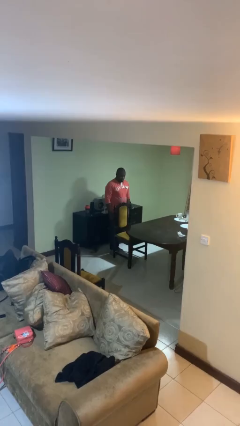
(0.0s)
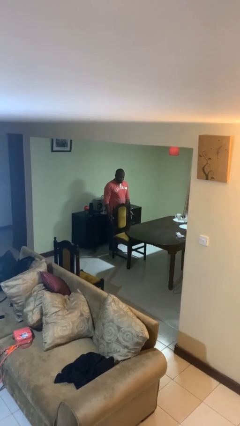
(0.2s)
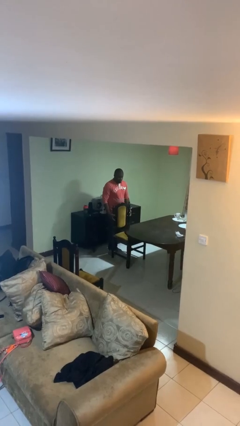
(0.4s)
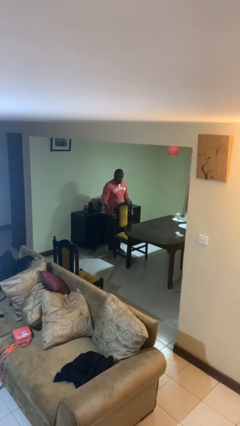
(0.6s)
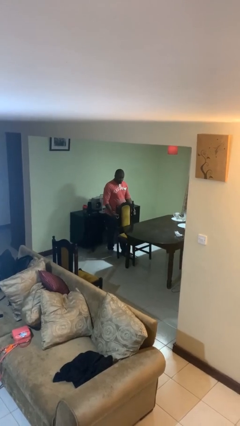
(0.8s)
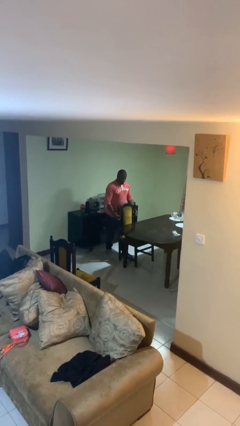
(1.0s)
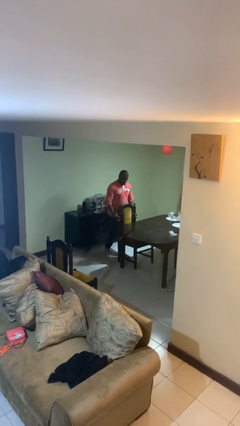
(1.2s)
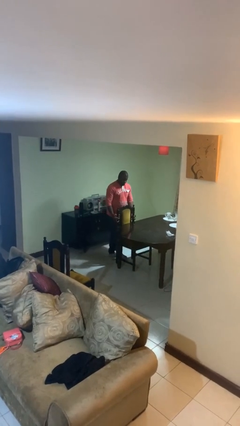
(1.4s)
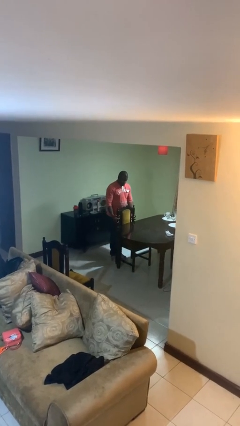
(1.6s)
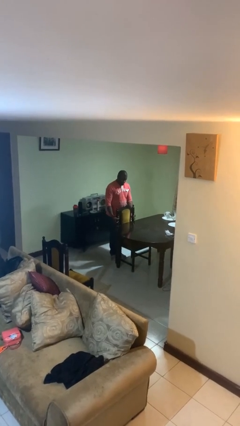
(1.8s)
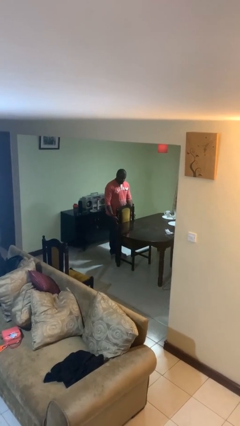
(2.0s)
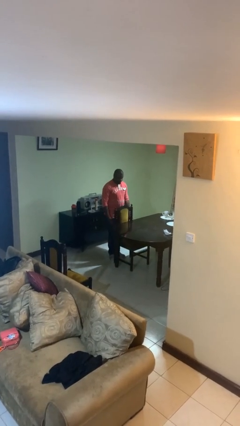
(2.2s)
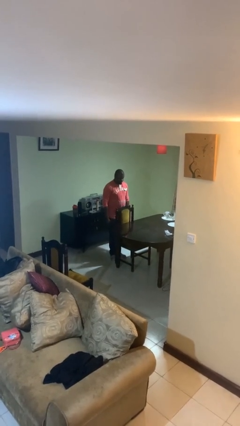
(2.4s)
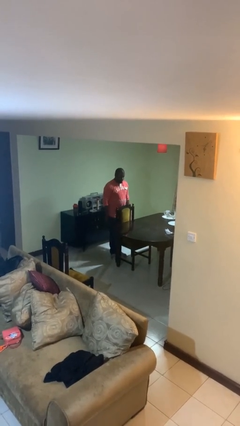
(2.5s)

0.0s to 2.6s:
person pushes in chair

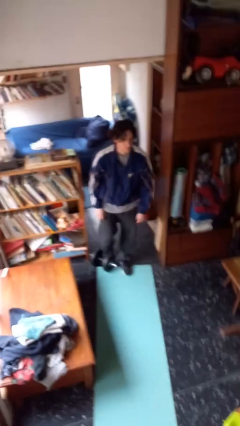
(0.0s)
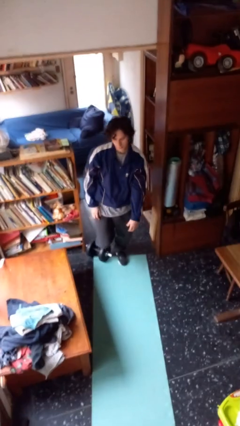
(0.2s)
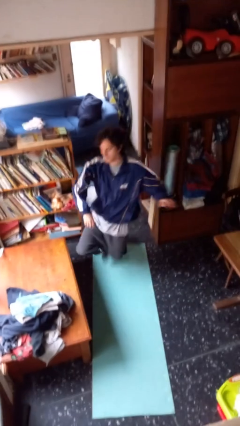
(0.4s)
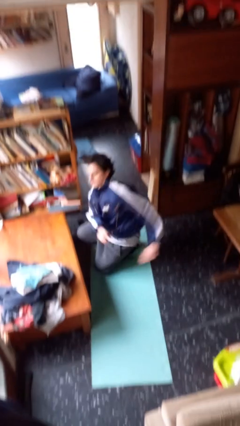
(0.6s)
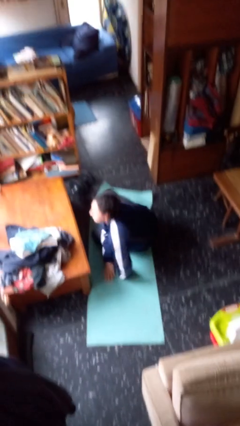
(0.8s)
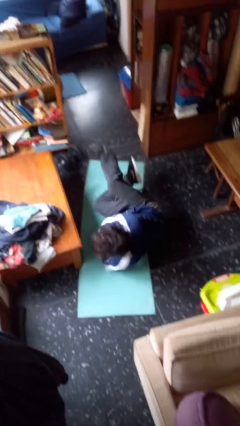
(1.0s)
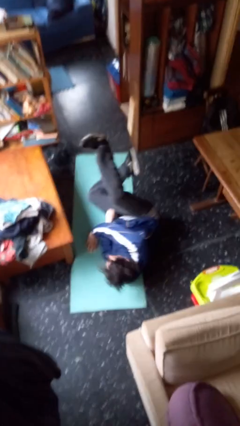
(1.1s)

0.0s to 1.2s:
person trips on object on floor

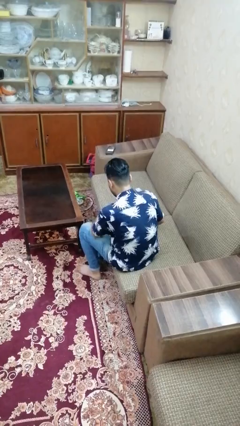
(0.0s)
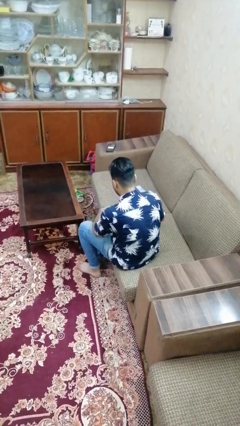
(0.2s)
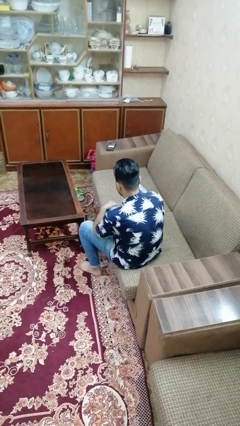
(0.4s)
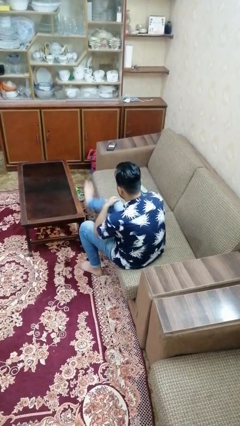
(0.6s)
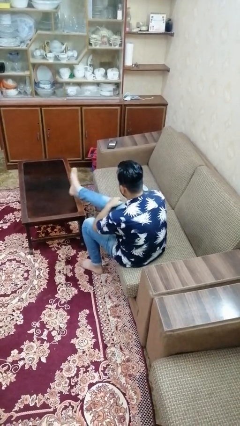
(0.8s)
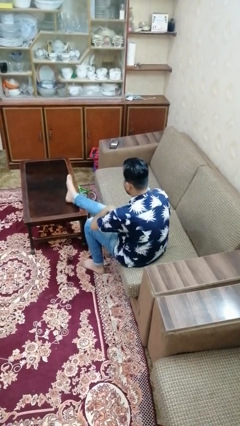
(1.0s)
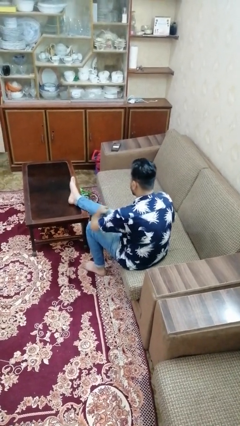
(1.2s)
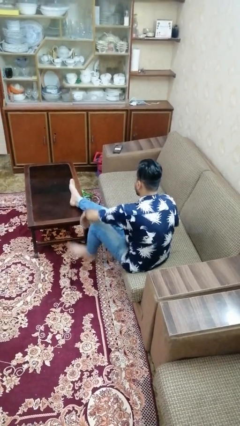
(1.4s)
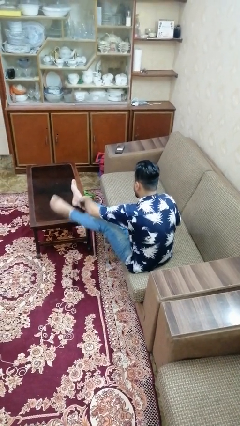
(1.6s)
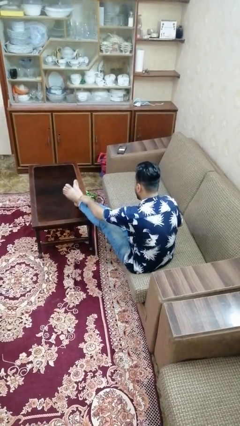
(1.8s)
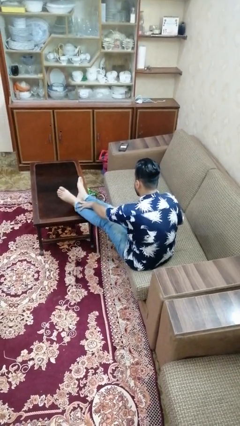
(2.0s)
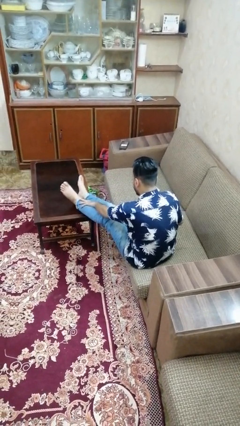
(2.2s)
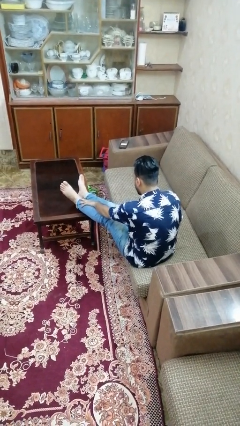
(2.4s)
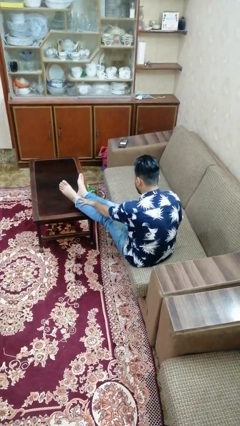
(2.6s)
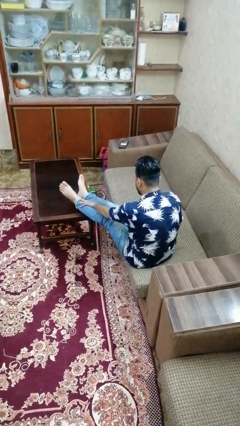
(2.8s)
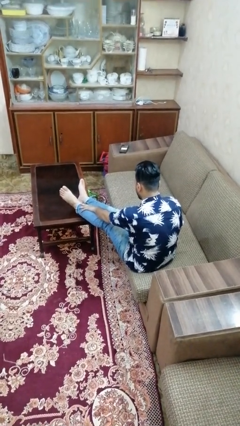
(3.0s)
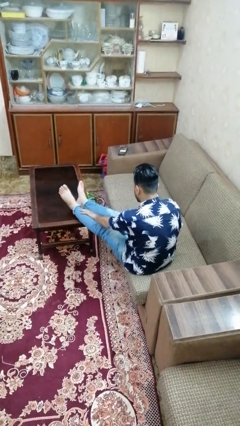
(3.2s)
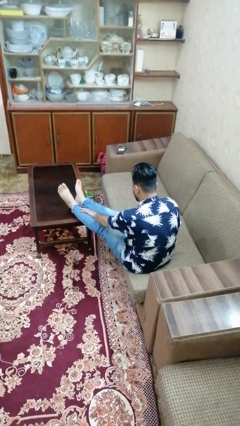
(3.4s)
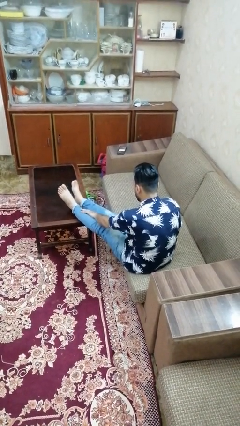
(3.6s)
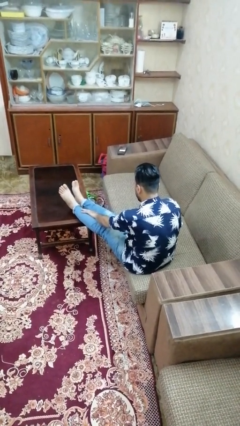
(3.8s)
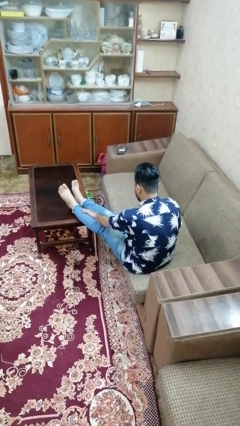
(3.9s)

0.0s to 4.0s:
person puts feet up

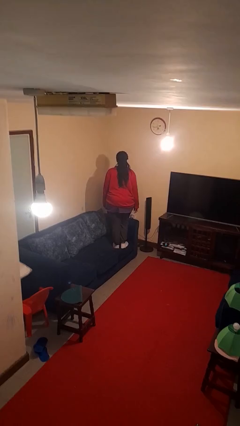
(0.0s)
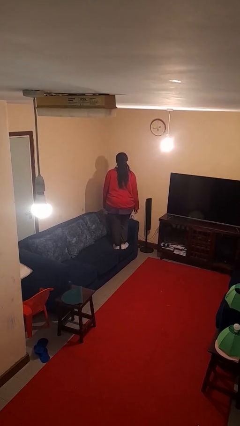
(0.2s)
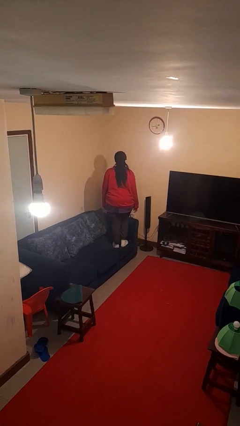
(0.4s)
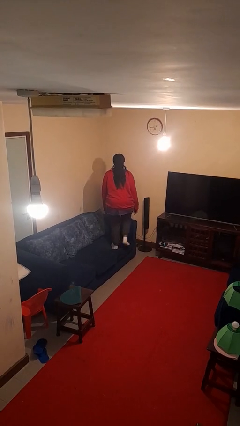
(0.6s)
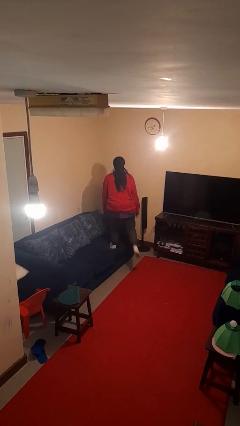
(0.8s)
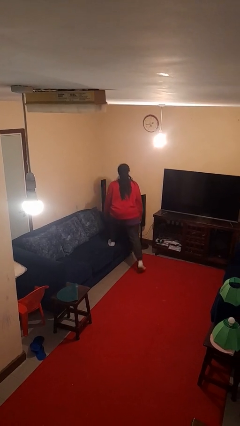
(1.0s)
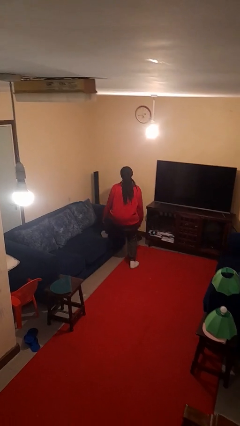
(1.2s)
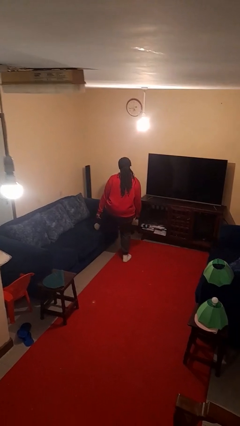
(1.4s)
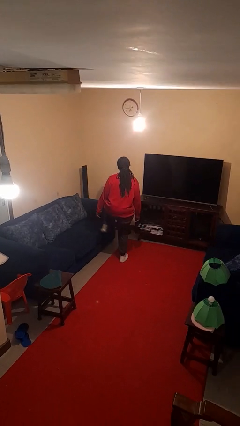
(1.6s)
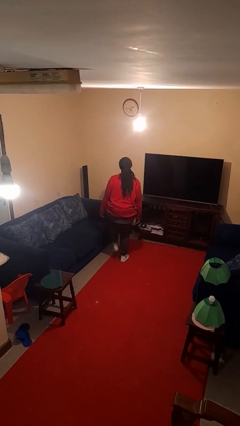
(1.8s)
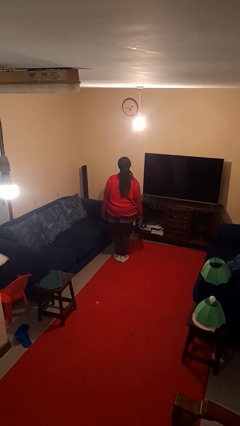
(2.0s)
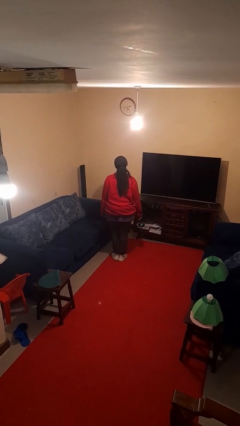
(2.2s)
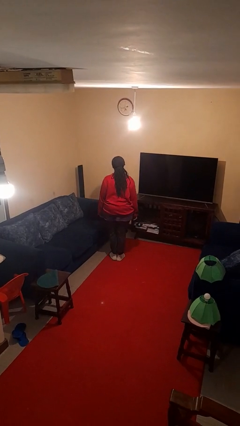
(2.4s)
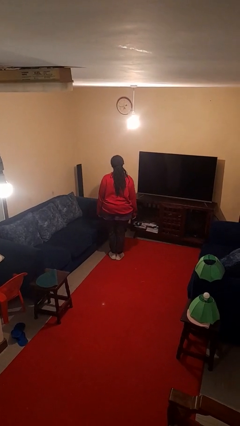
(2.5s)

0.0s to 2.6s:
person climbs off couch

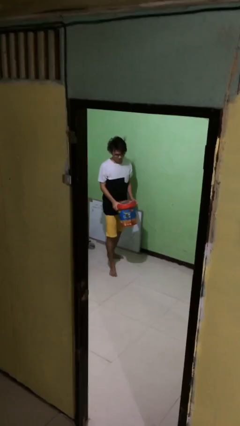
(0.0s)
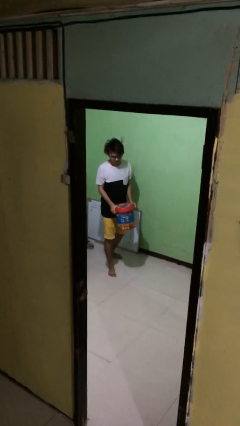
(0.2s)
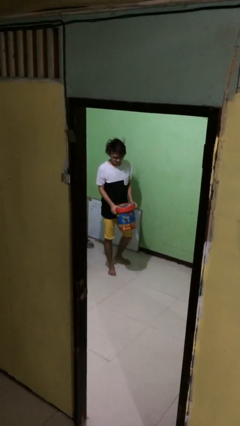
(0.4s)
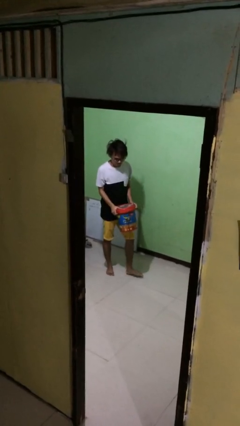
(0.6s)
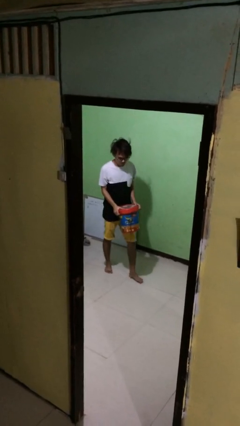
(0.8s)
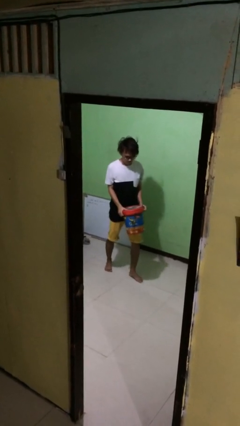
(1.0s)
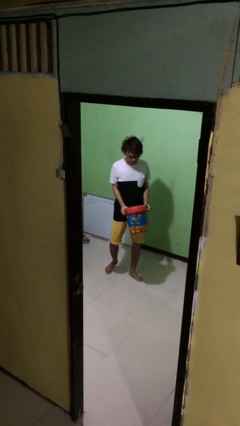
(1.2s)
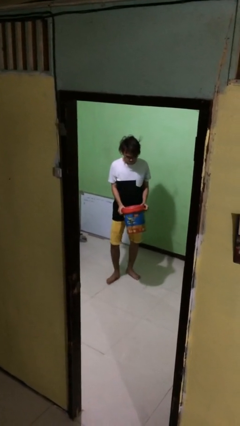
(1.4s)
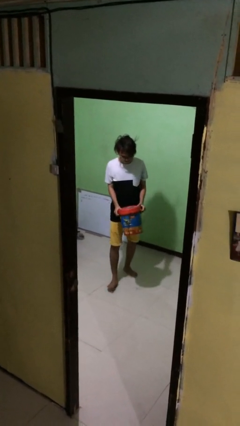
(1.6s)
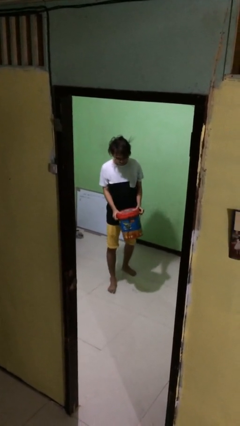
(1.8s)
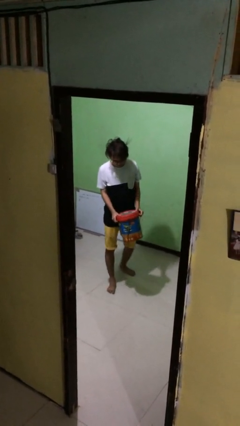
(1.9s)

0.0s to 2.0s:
person carries heavy object

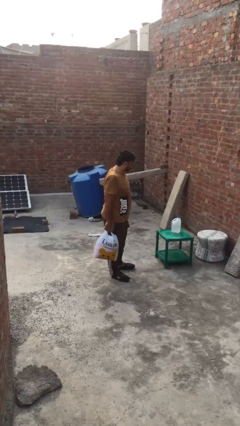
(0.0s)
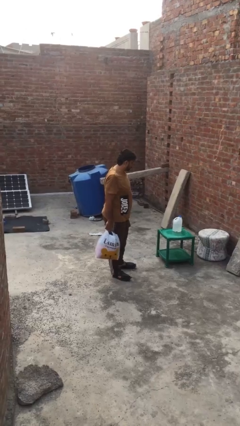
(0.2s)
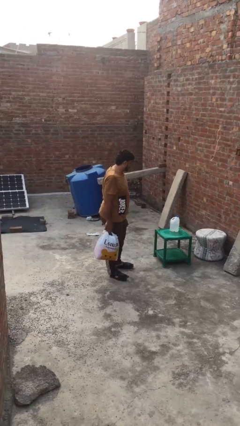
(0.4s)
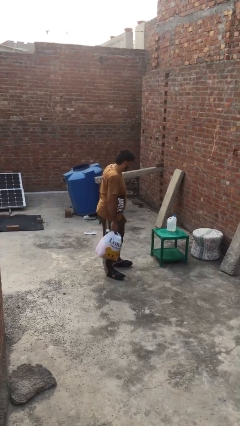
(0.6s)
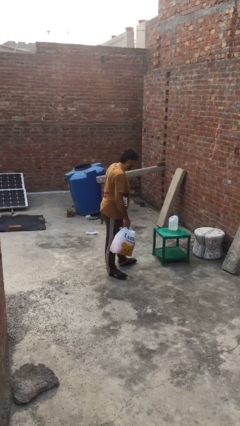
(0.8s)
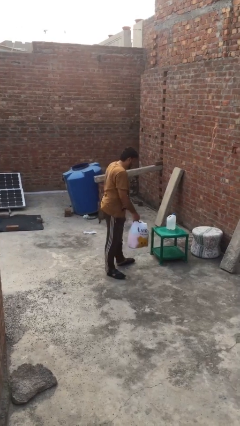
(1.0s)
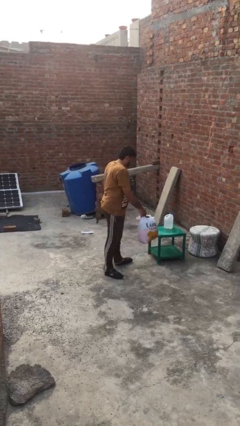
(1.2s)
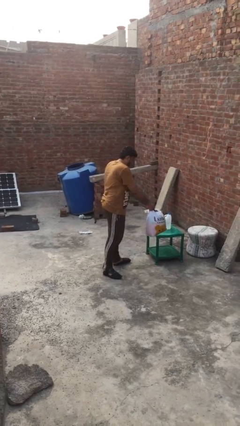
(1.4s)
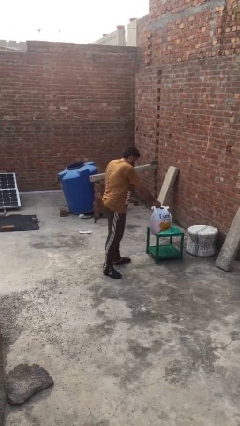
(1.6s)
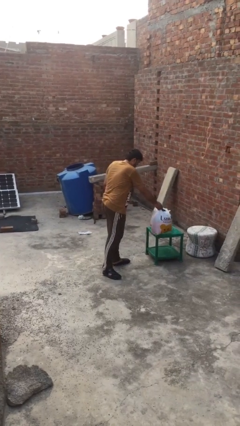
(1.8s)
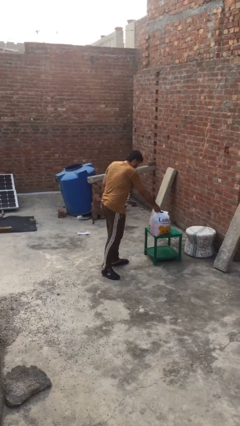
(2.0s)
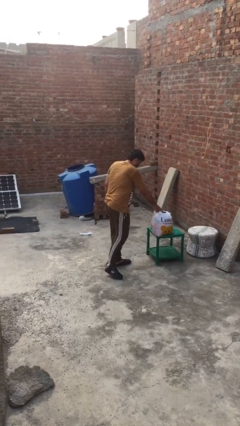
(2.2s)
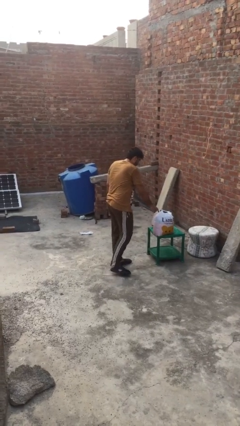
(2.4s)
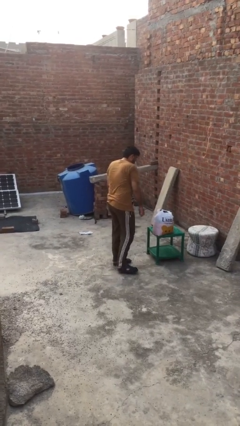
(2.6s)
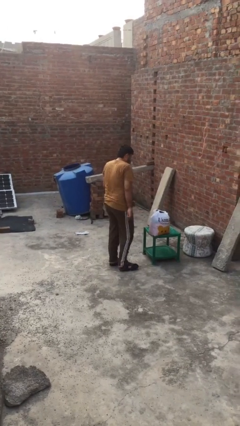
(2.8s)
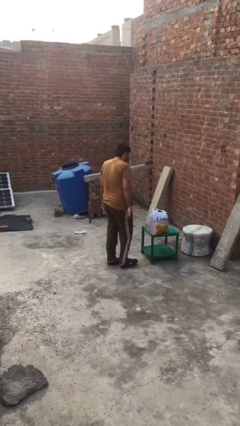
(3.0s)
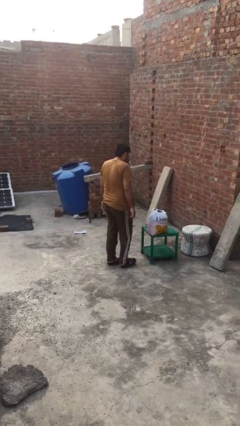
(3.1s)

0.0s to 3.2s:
person puts down object on table

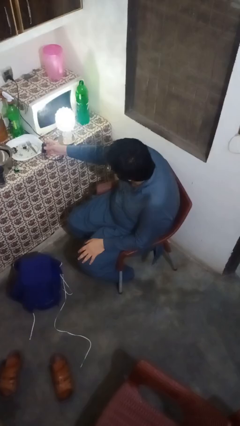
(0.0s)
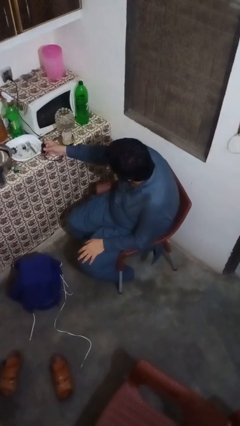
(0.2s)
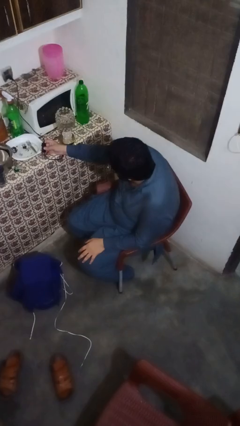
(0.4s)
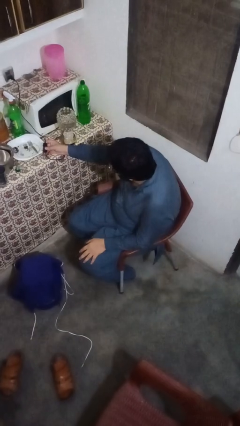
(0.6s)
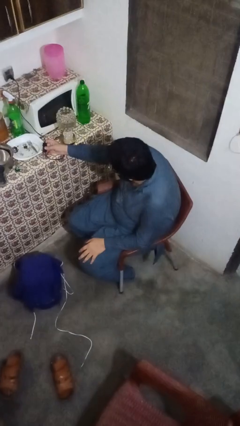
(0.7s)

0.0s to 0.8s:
person turns off lamp

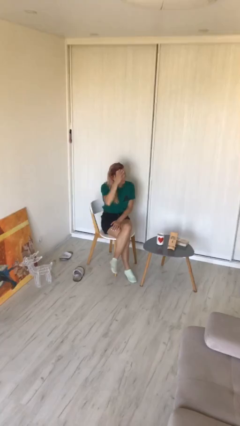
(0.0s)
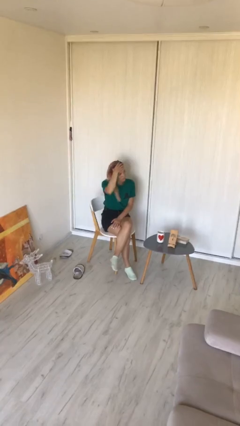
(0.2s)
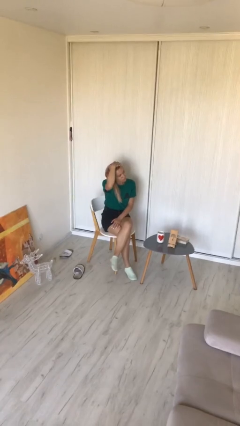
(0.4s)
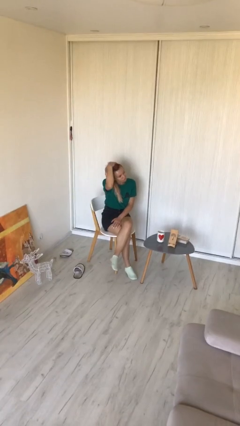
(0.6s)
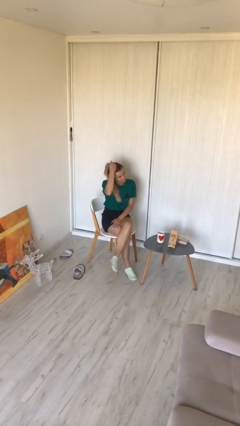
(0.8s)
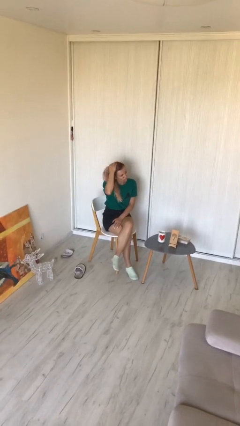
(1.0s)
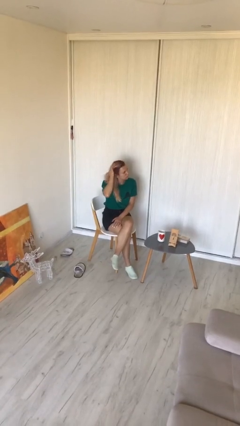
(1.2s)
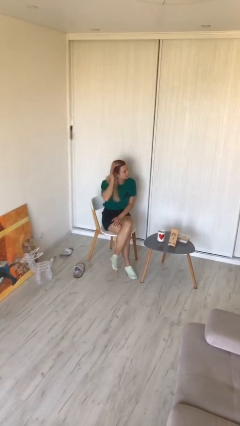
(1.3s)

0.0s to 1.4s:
person strokes hair
